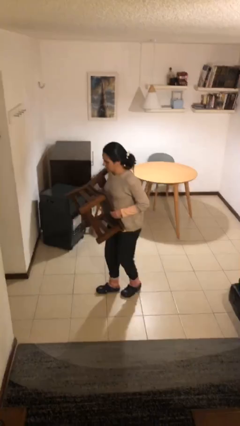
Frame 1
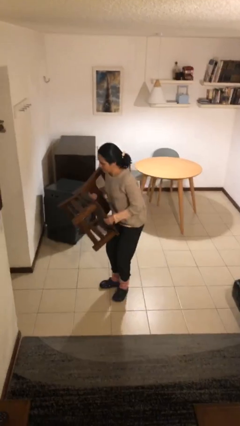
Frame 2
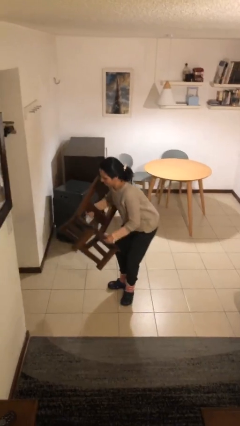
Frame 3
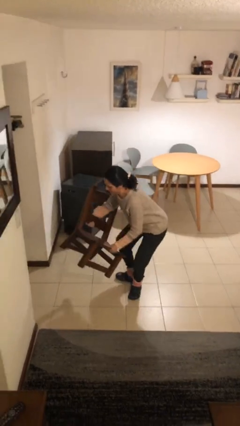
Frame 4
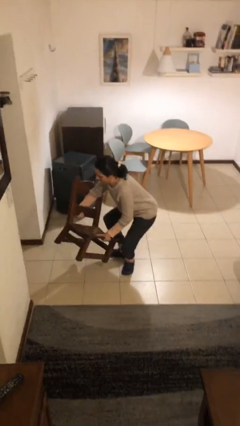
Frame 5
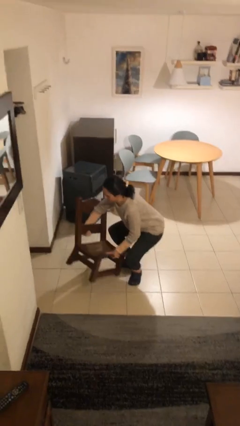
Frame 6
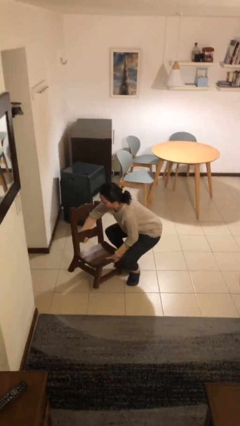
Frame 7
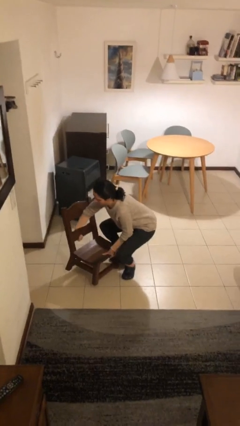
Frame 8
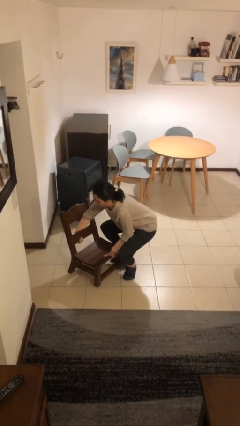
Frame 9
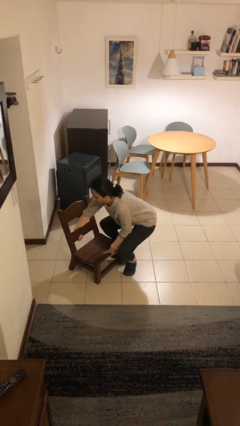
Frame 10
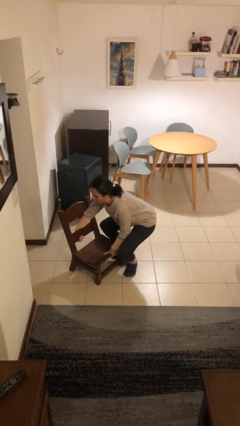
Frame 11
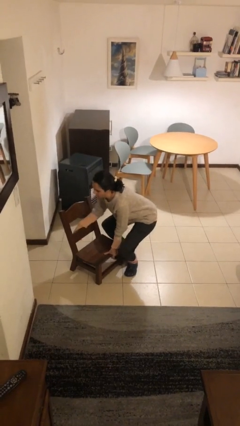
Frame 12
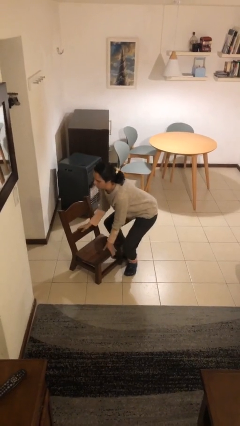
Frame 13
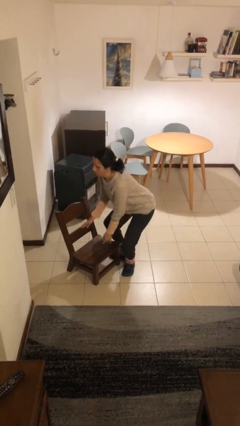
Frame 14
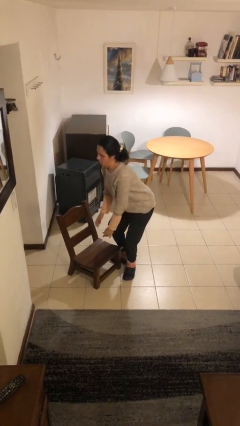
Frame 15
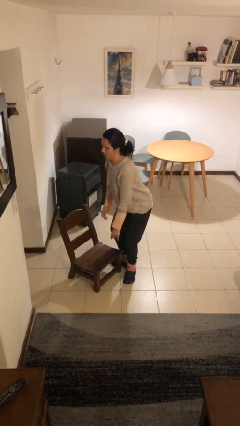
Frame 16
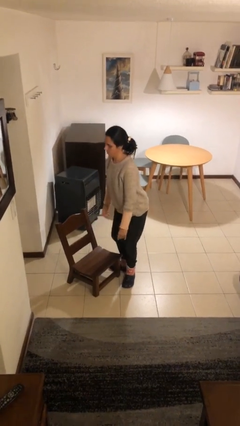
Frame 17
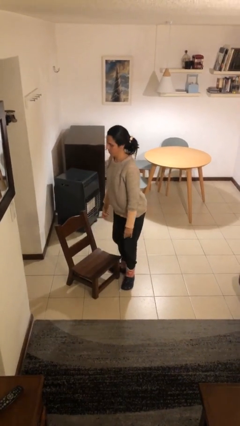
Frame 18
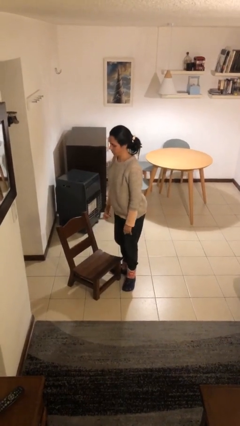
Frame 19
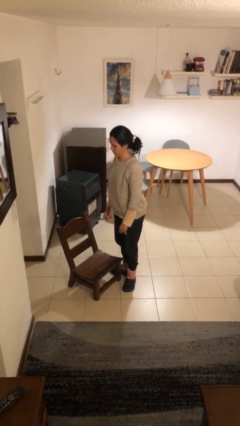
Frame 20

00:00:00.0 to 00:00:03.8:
person puts down object on floor

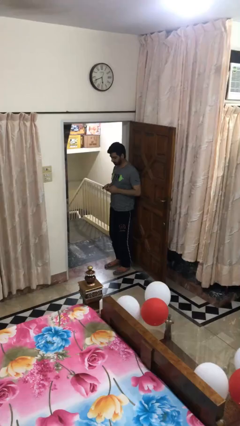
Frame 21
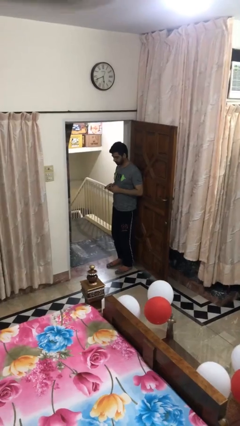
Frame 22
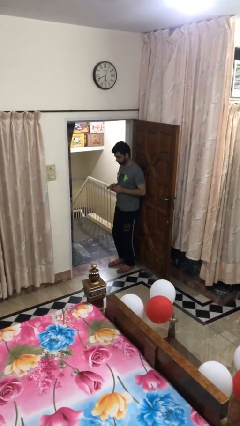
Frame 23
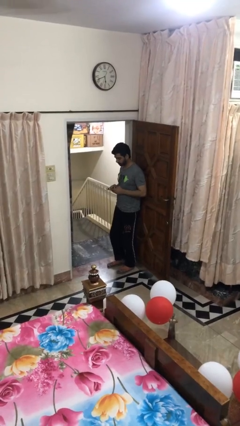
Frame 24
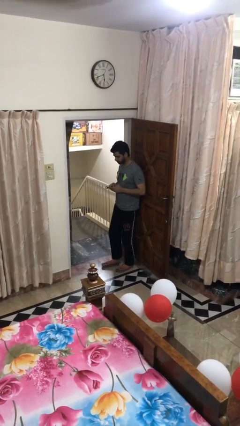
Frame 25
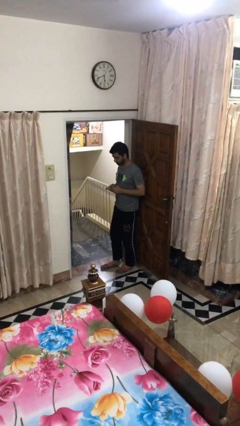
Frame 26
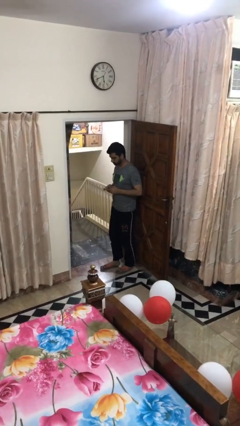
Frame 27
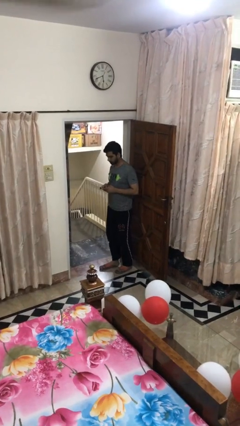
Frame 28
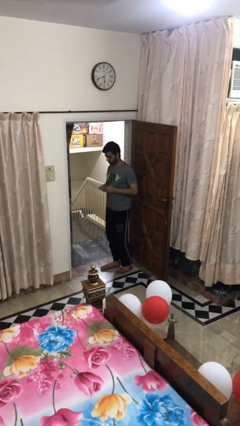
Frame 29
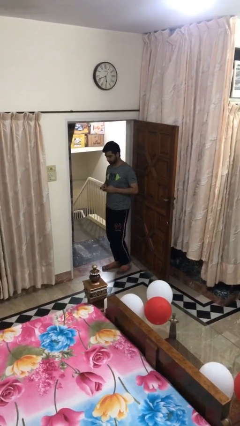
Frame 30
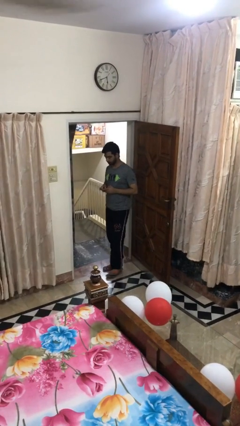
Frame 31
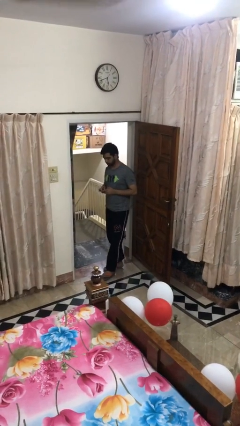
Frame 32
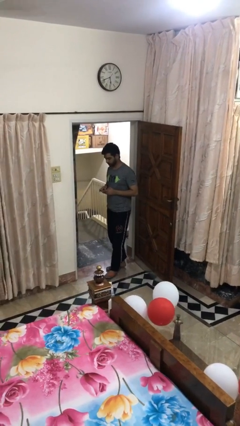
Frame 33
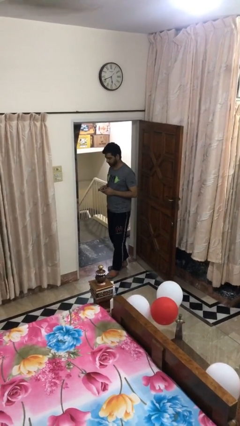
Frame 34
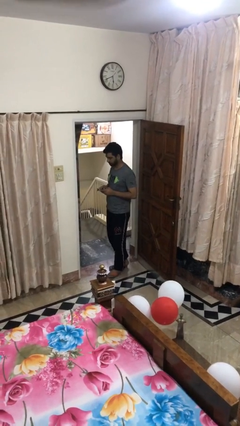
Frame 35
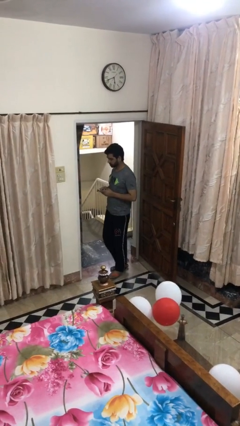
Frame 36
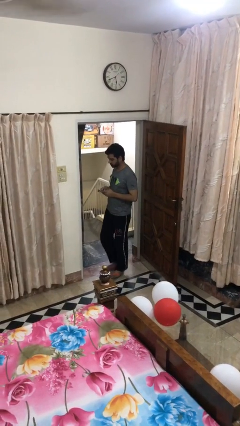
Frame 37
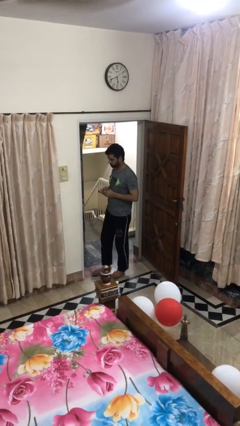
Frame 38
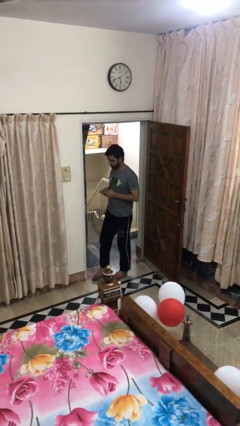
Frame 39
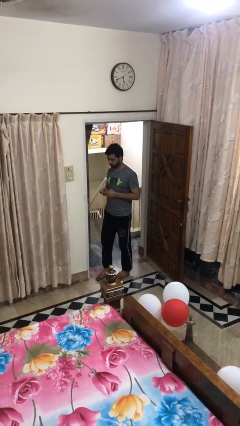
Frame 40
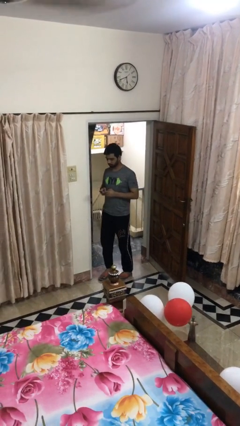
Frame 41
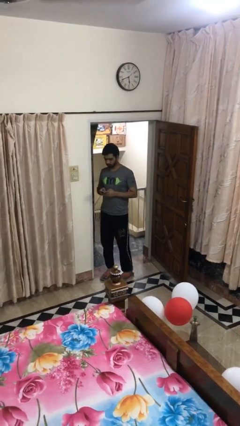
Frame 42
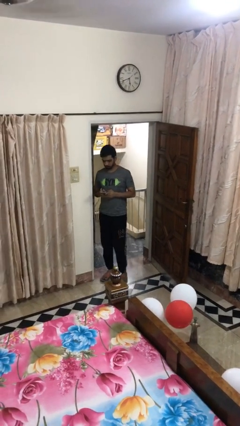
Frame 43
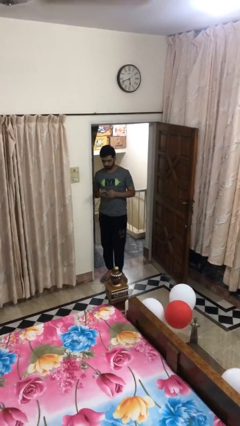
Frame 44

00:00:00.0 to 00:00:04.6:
person texts on phone

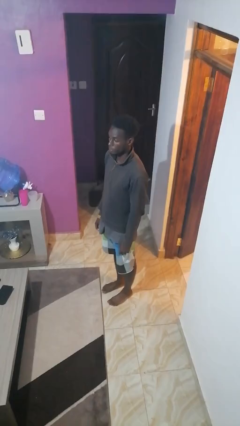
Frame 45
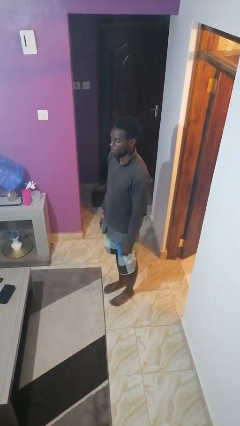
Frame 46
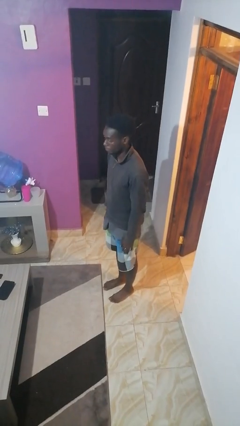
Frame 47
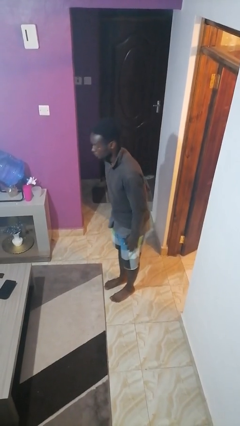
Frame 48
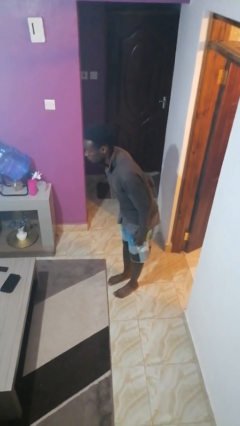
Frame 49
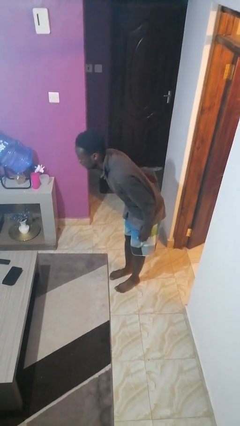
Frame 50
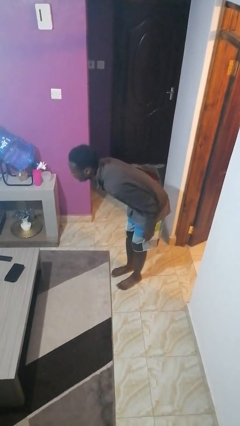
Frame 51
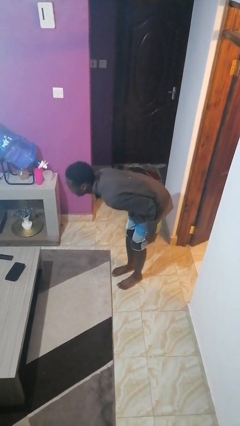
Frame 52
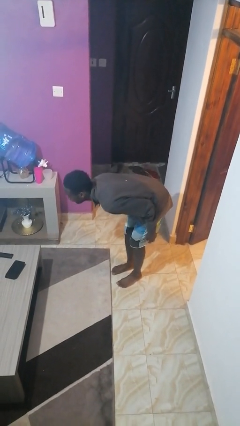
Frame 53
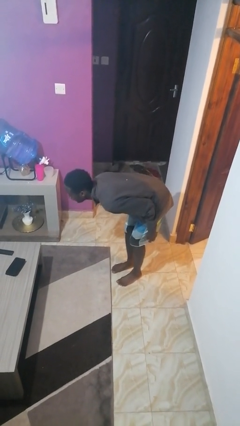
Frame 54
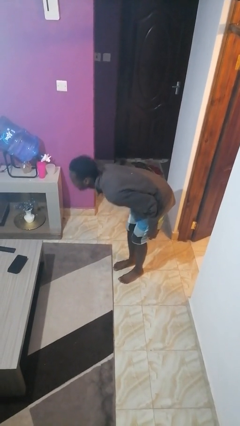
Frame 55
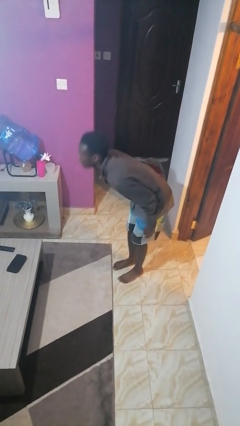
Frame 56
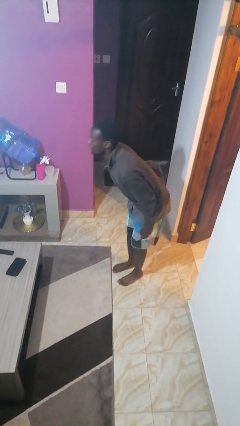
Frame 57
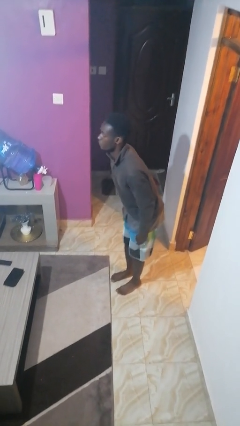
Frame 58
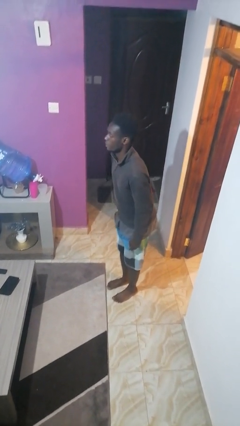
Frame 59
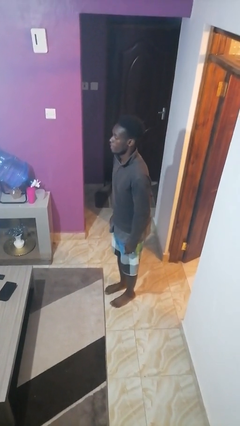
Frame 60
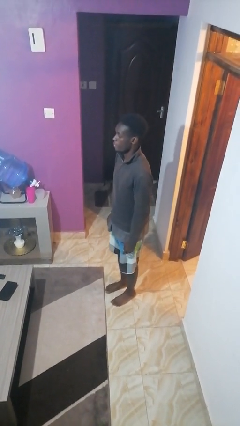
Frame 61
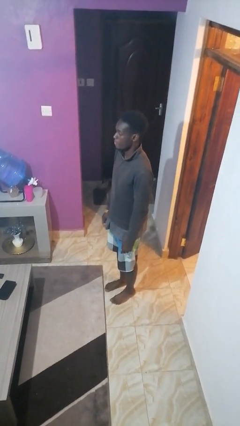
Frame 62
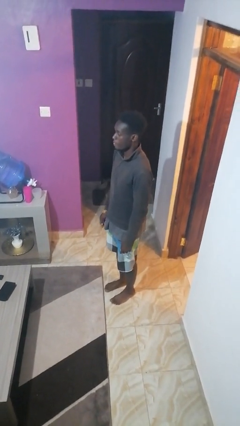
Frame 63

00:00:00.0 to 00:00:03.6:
person bows

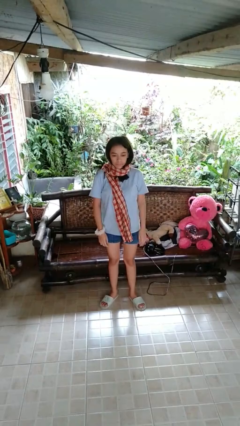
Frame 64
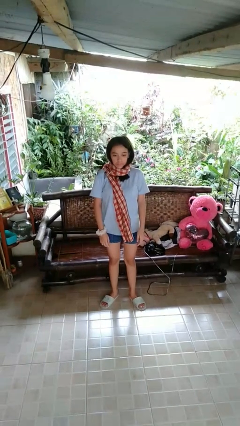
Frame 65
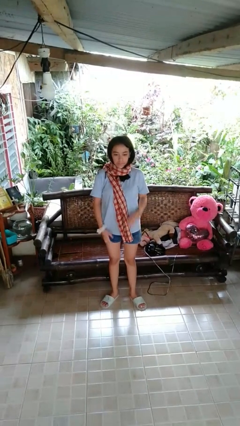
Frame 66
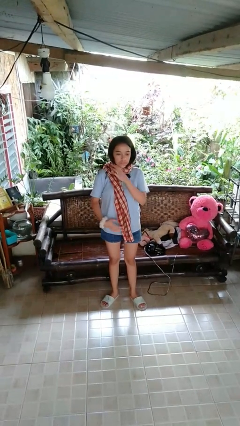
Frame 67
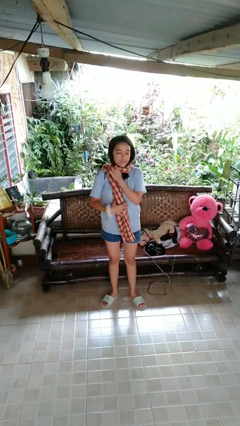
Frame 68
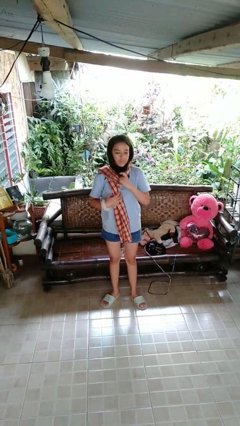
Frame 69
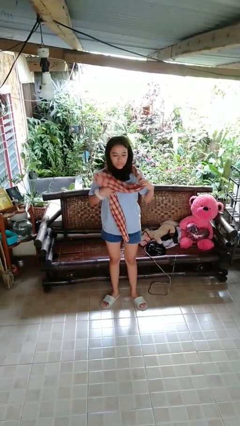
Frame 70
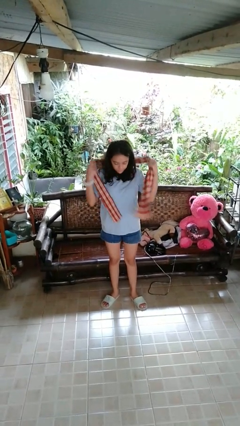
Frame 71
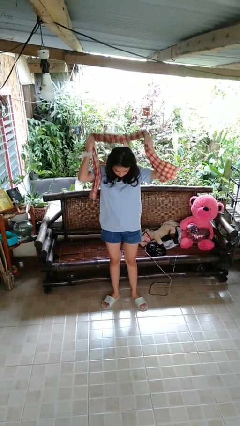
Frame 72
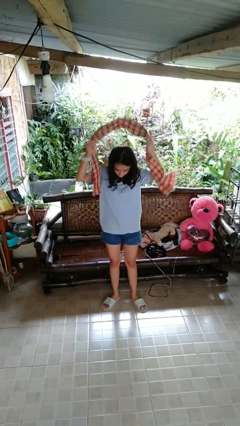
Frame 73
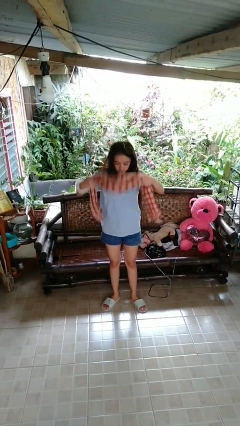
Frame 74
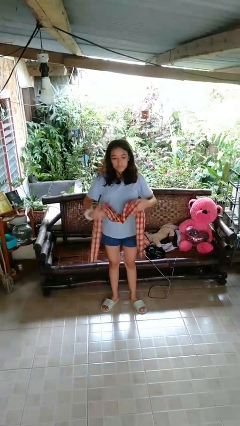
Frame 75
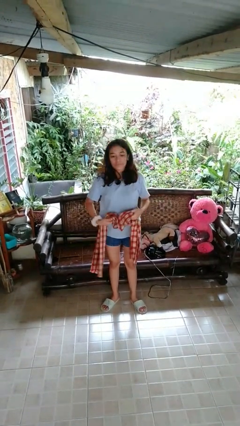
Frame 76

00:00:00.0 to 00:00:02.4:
person takes off scarf

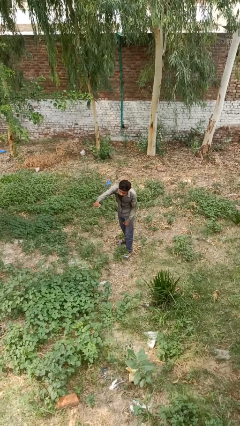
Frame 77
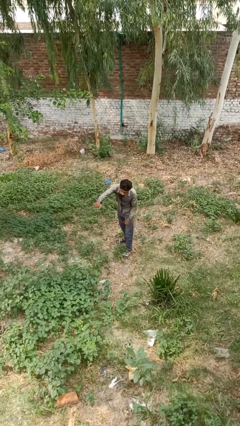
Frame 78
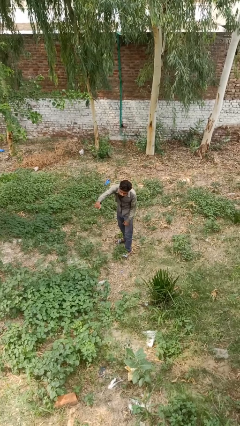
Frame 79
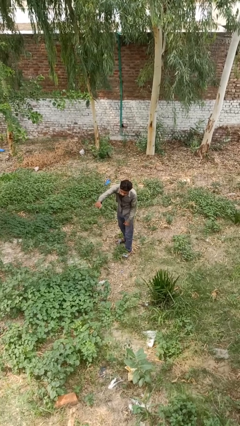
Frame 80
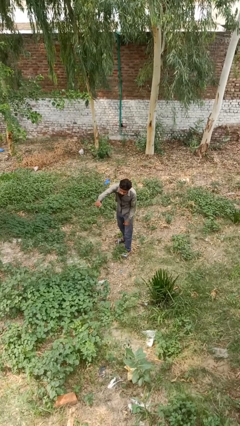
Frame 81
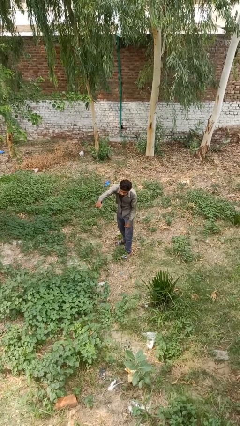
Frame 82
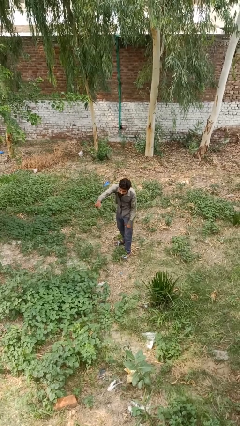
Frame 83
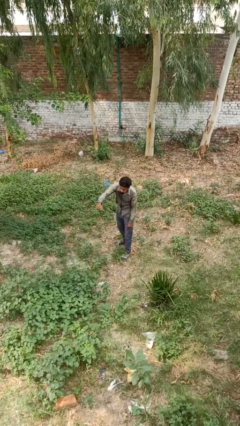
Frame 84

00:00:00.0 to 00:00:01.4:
person punches

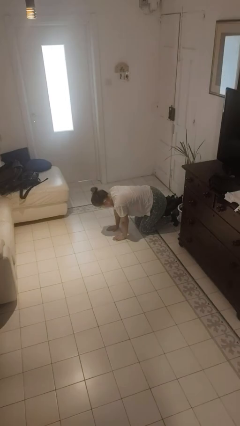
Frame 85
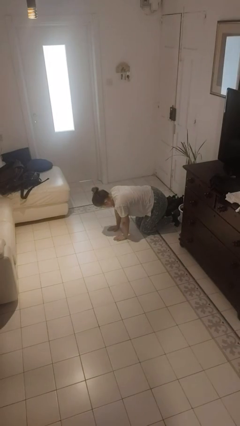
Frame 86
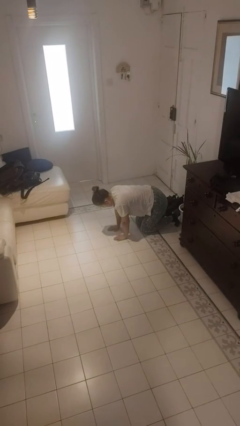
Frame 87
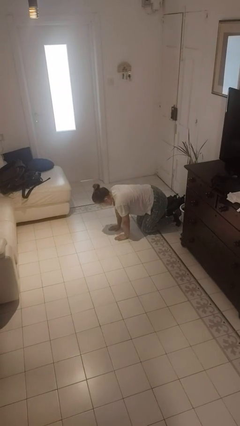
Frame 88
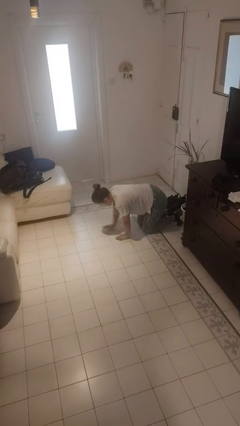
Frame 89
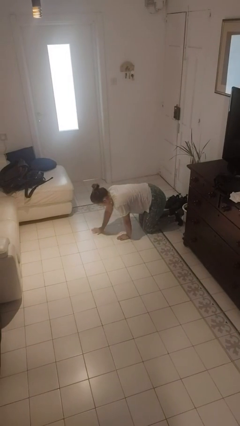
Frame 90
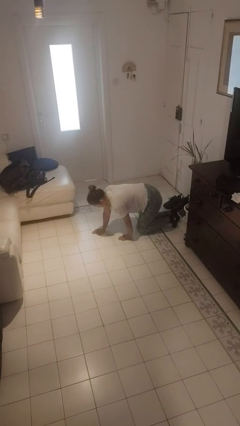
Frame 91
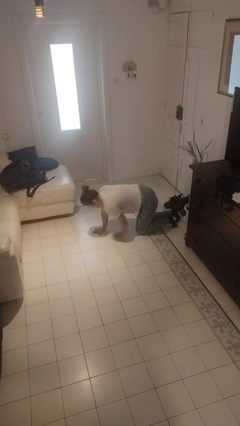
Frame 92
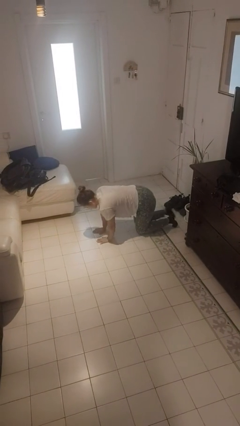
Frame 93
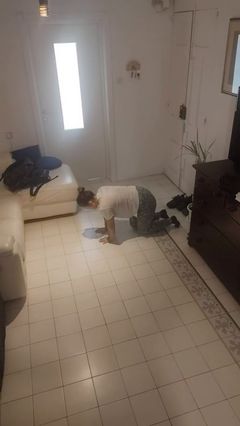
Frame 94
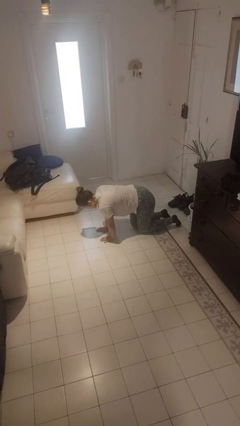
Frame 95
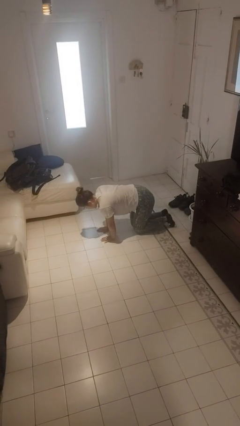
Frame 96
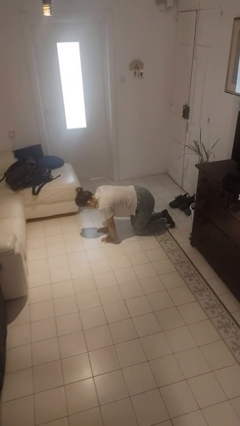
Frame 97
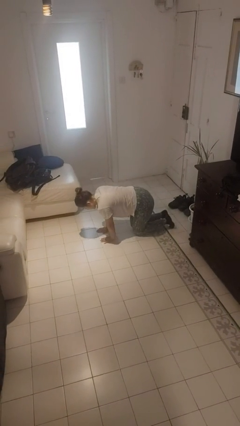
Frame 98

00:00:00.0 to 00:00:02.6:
person crawls
